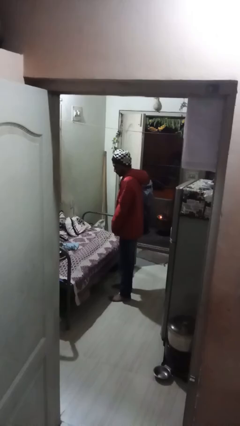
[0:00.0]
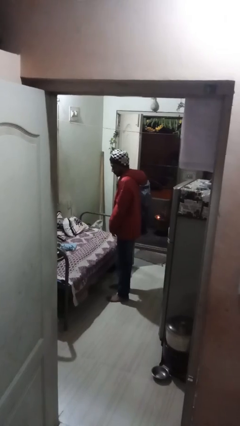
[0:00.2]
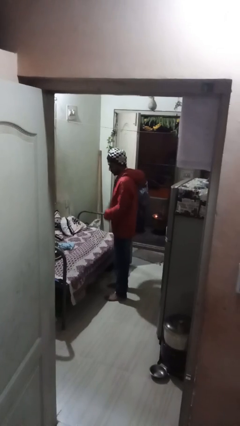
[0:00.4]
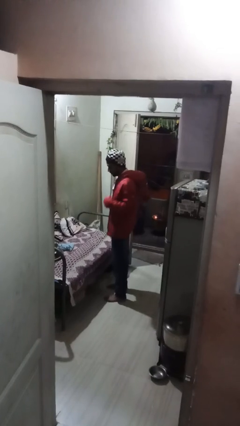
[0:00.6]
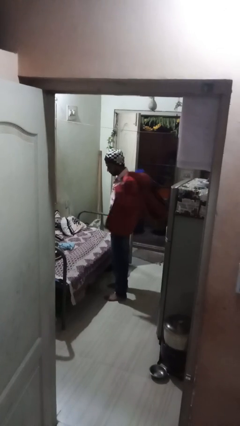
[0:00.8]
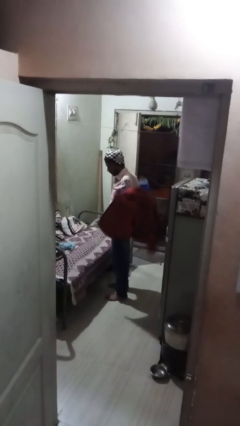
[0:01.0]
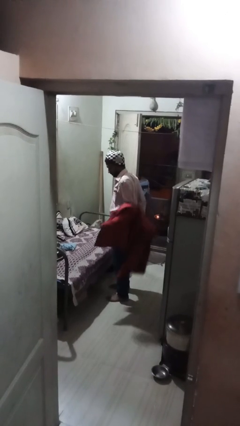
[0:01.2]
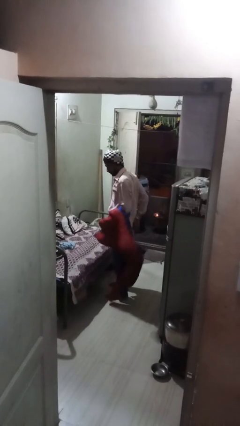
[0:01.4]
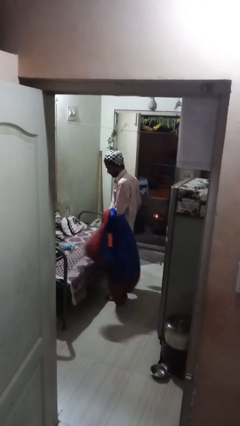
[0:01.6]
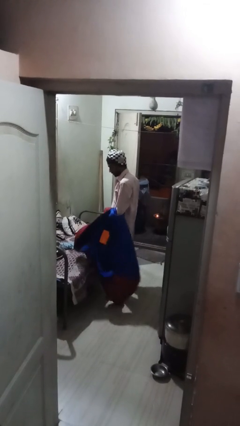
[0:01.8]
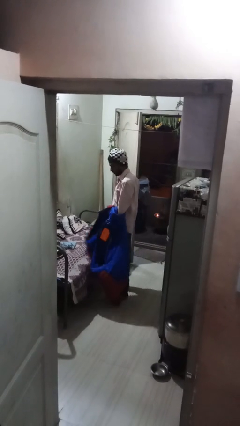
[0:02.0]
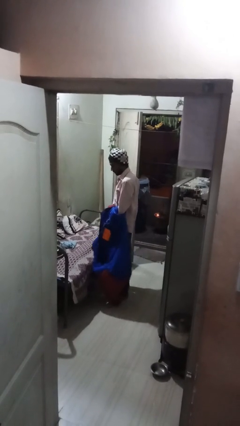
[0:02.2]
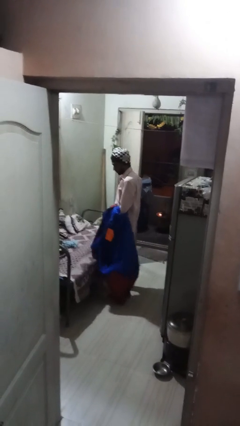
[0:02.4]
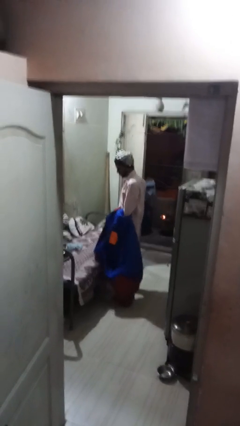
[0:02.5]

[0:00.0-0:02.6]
person takes off jacket

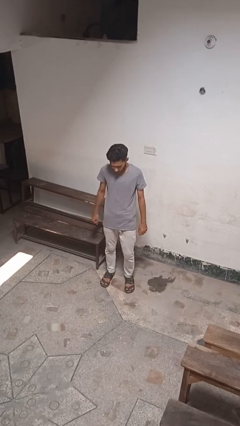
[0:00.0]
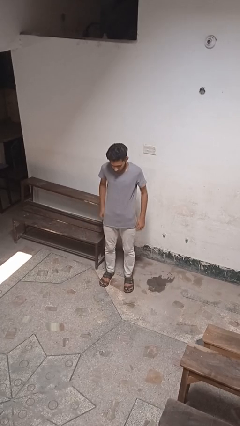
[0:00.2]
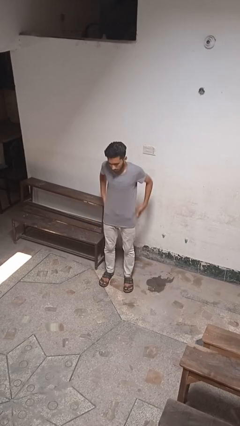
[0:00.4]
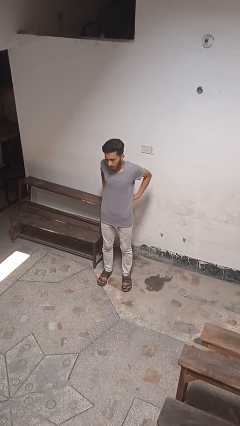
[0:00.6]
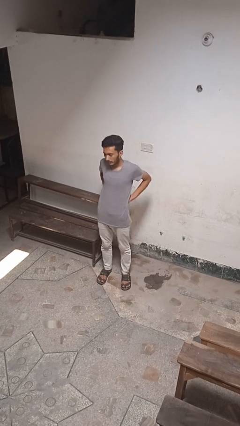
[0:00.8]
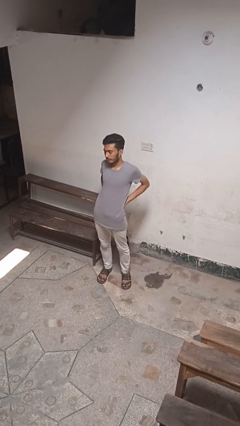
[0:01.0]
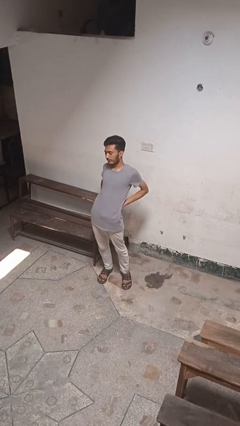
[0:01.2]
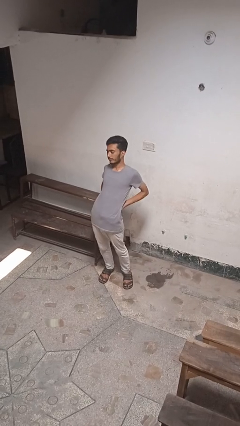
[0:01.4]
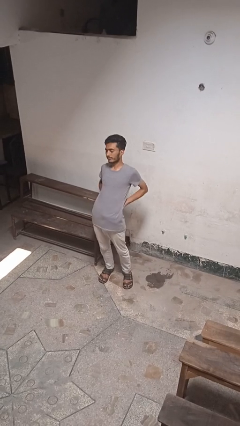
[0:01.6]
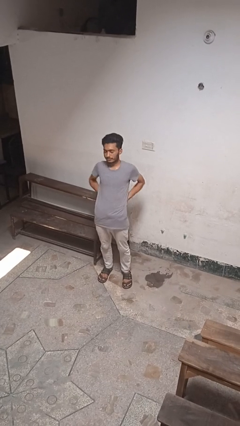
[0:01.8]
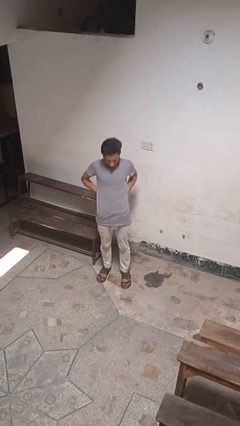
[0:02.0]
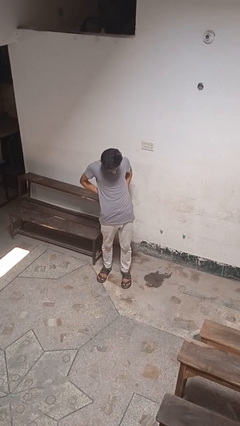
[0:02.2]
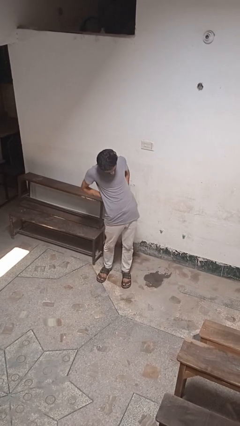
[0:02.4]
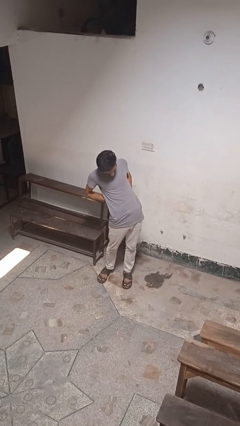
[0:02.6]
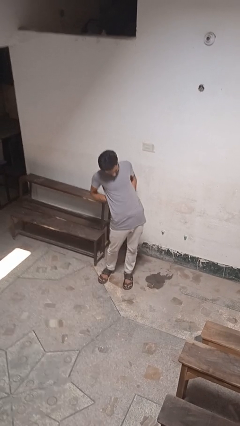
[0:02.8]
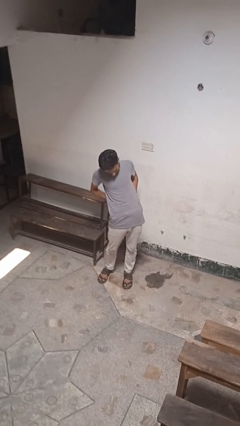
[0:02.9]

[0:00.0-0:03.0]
person puts feet up

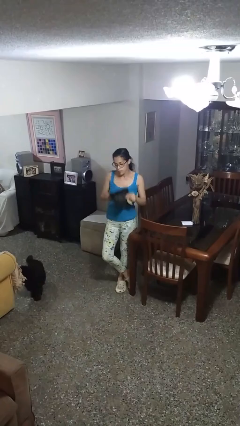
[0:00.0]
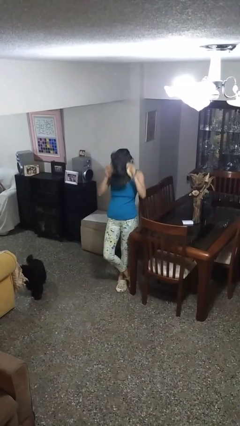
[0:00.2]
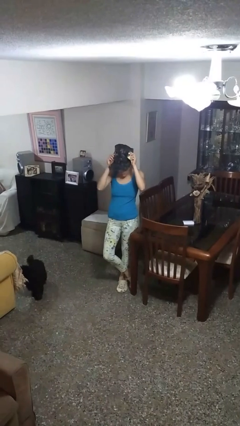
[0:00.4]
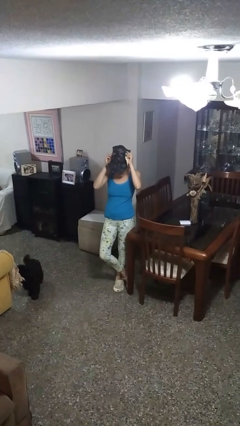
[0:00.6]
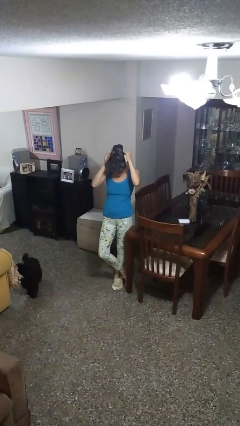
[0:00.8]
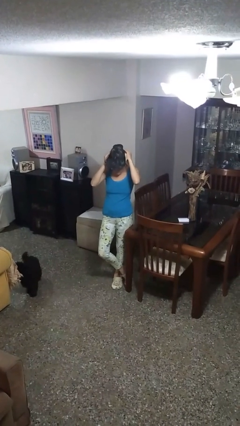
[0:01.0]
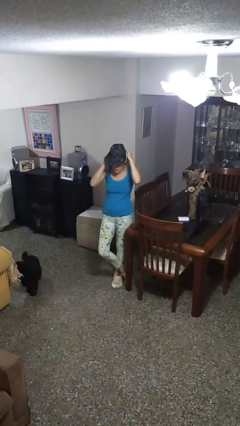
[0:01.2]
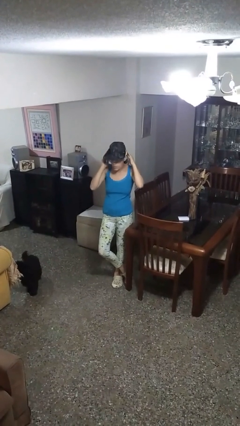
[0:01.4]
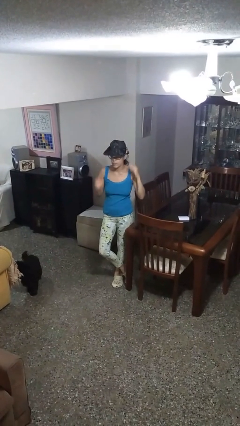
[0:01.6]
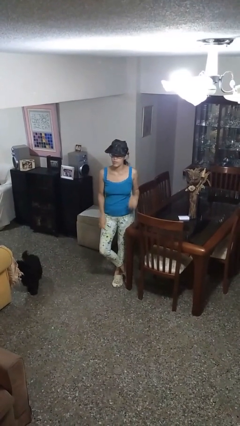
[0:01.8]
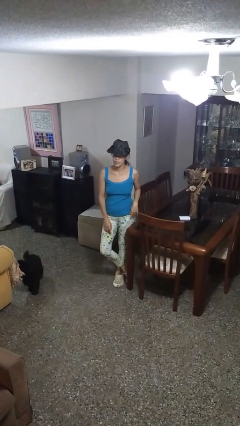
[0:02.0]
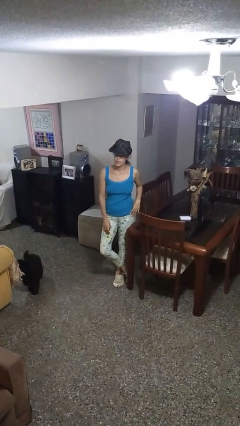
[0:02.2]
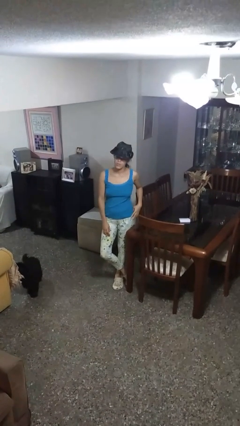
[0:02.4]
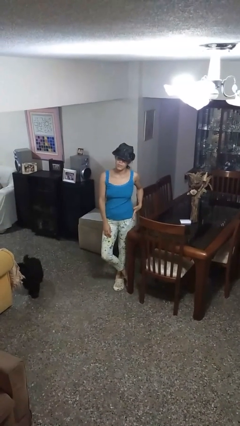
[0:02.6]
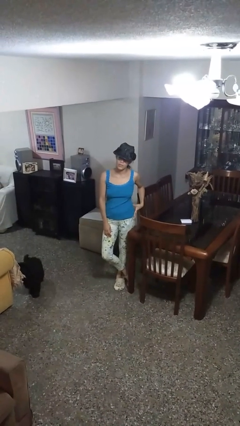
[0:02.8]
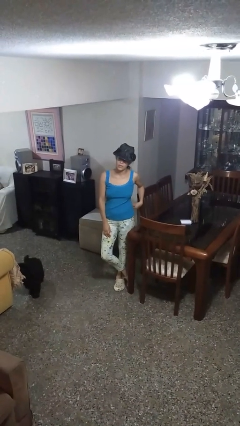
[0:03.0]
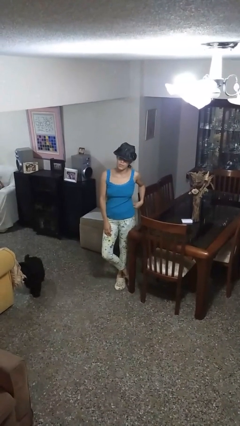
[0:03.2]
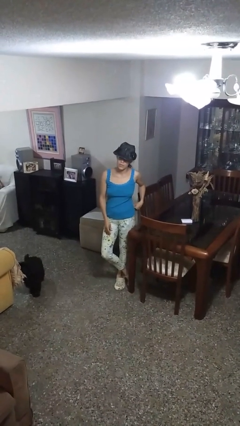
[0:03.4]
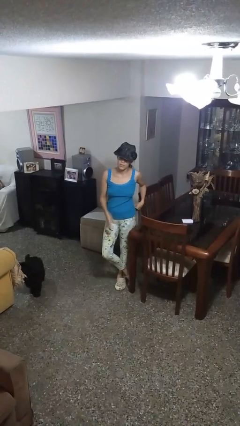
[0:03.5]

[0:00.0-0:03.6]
person puts on hat

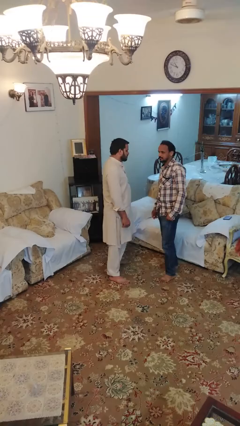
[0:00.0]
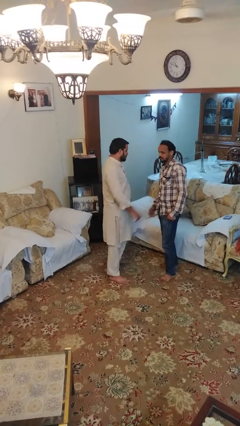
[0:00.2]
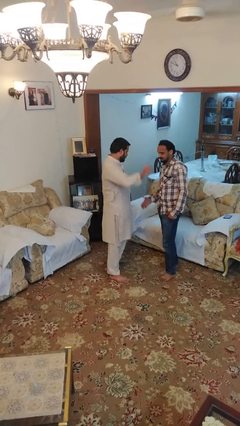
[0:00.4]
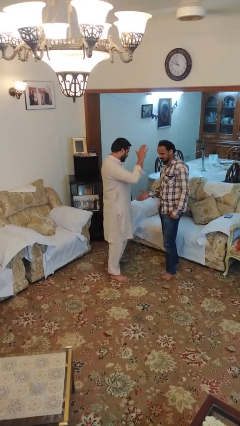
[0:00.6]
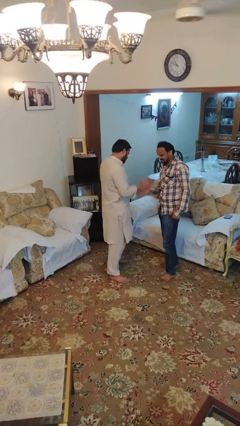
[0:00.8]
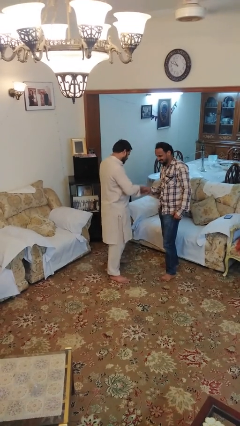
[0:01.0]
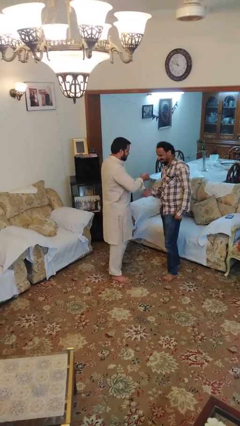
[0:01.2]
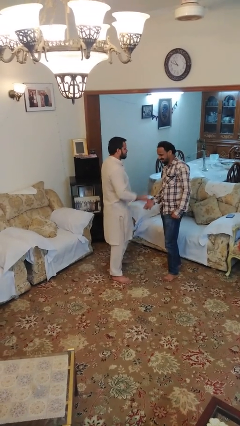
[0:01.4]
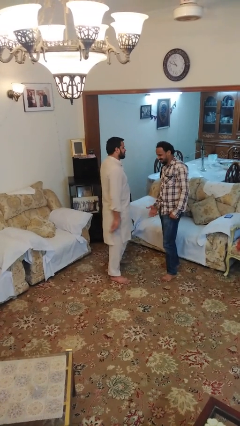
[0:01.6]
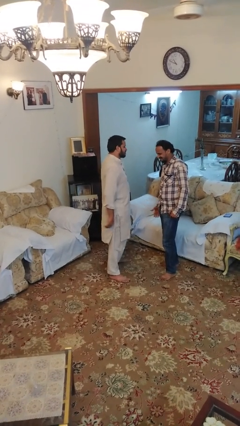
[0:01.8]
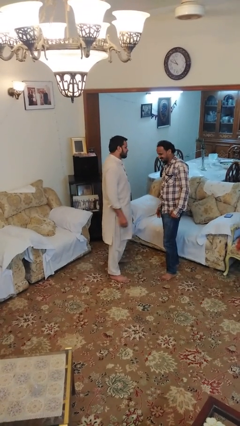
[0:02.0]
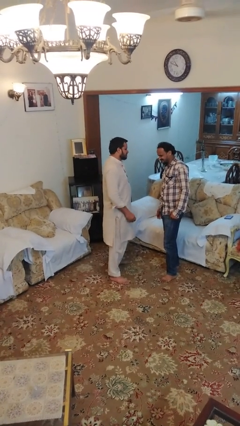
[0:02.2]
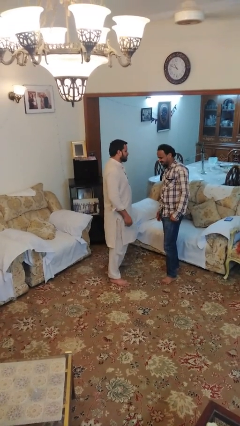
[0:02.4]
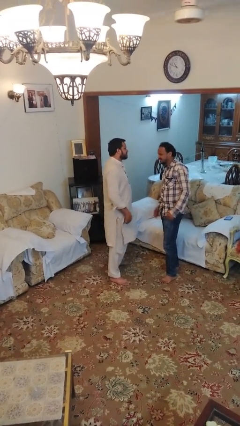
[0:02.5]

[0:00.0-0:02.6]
person highfives hand

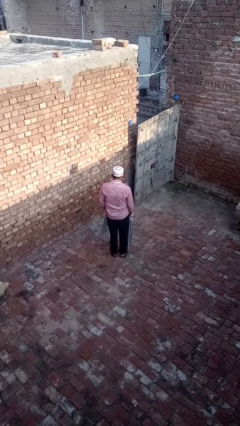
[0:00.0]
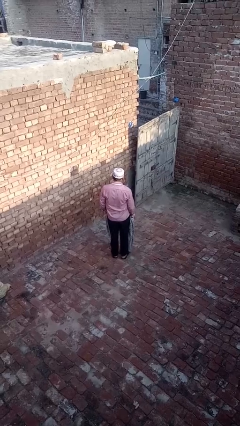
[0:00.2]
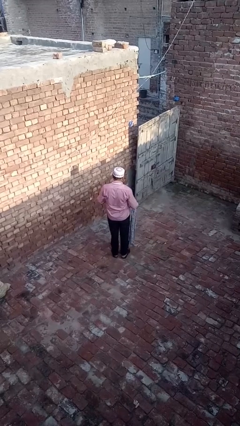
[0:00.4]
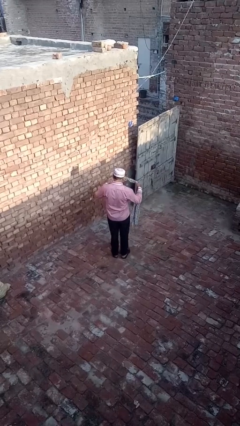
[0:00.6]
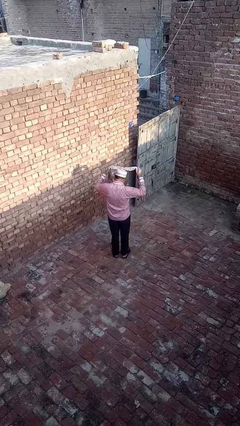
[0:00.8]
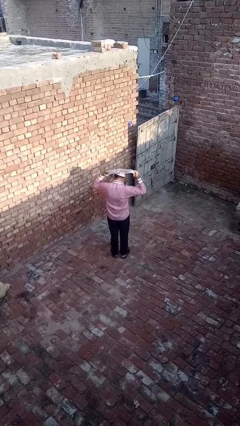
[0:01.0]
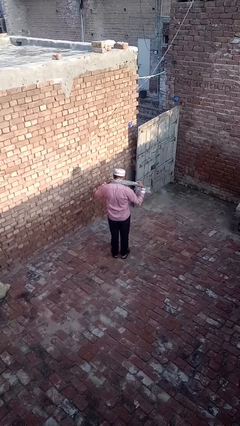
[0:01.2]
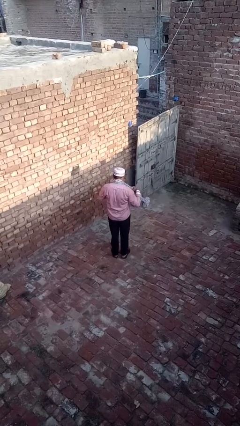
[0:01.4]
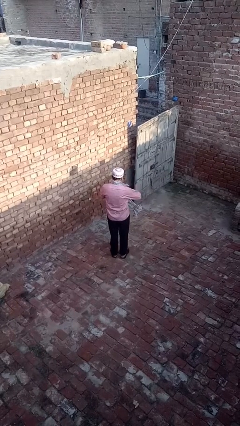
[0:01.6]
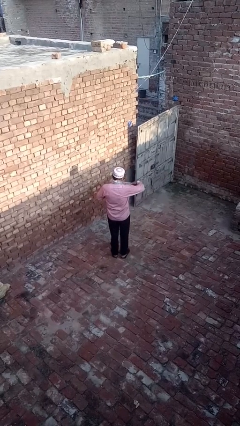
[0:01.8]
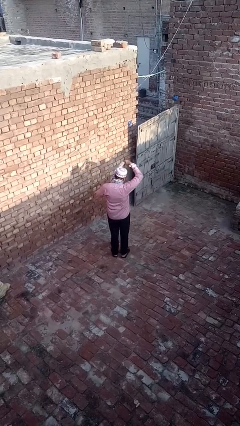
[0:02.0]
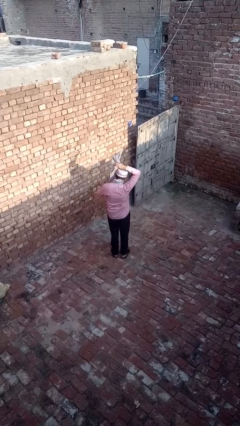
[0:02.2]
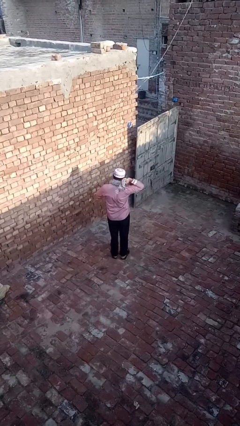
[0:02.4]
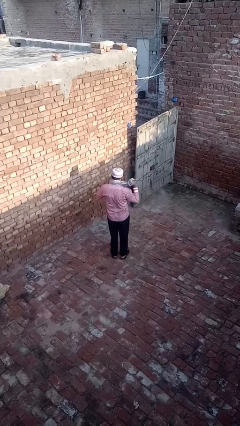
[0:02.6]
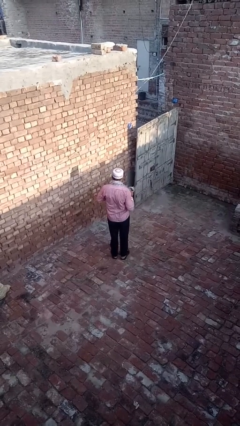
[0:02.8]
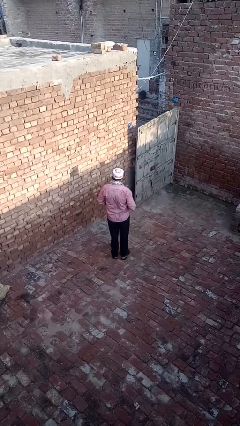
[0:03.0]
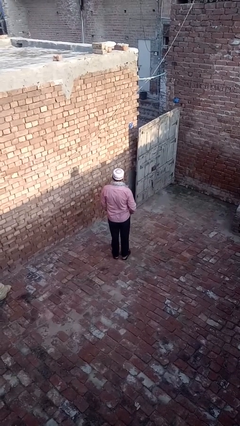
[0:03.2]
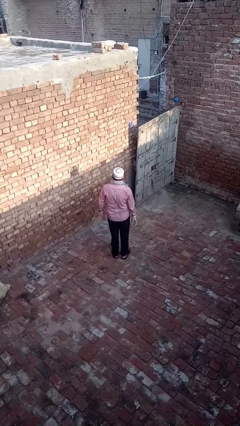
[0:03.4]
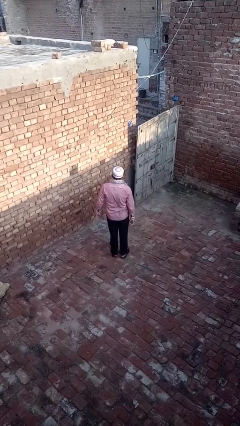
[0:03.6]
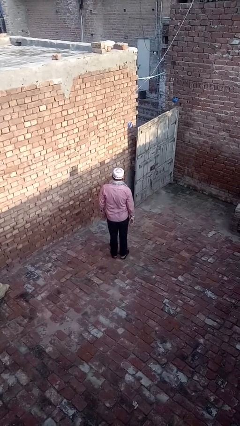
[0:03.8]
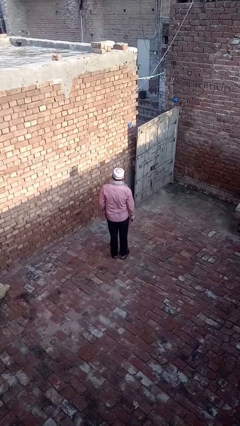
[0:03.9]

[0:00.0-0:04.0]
person puts on scarf

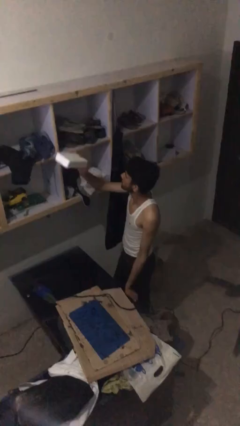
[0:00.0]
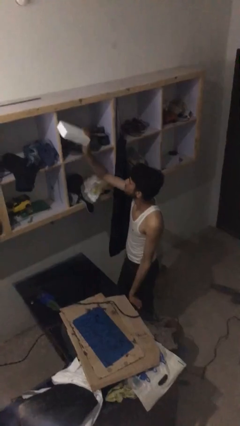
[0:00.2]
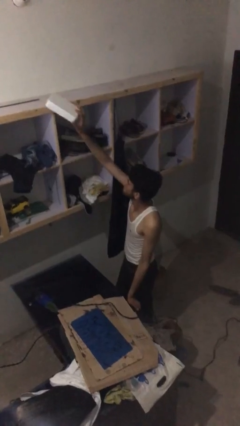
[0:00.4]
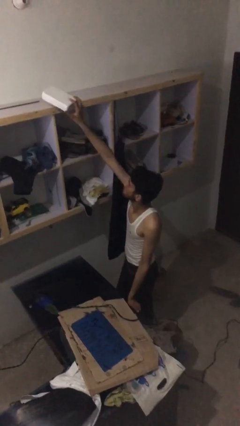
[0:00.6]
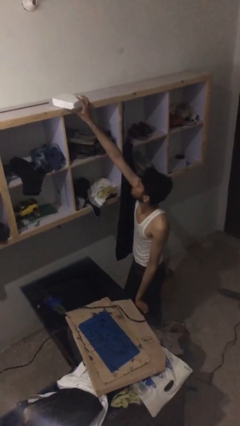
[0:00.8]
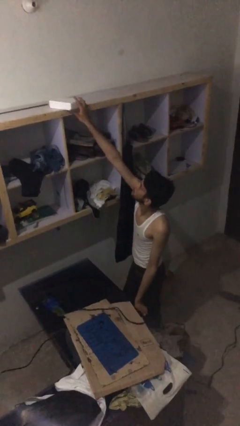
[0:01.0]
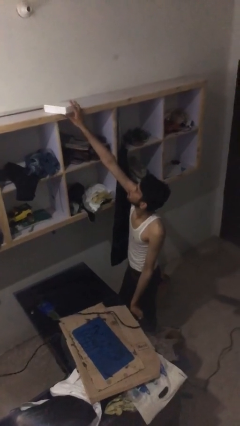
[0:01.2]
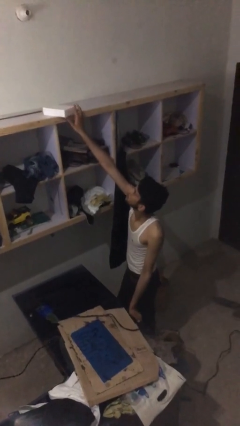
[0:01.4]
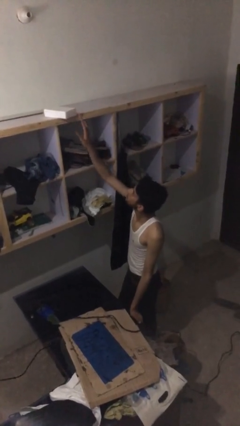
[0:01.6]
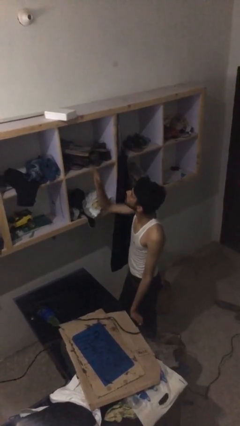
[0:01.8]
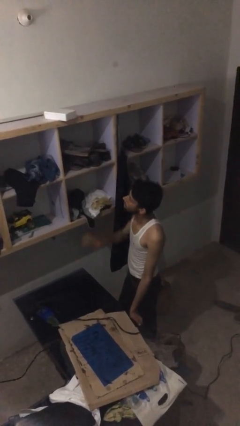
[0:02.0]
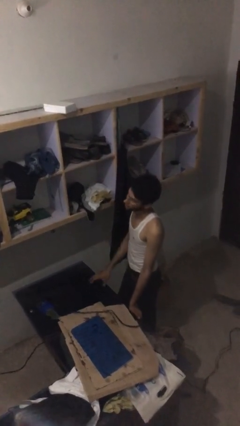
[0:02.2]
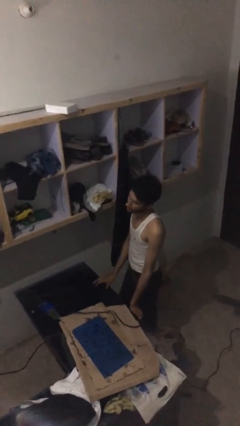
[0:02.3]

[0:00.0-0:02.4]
person puts down object on shelf
